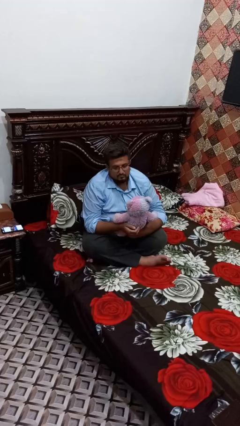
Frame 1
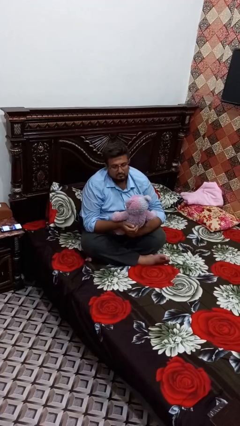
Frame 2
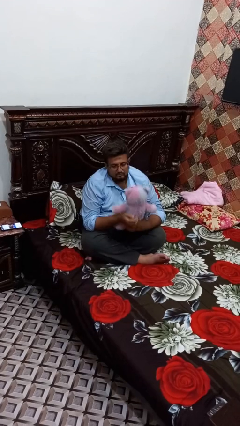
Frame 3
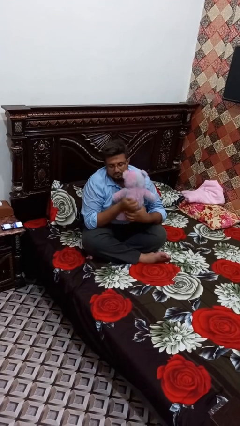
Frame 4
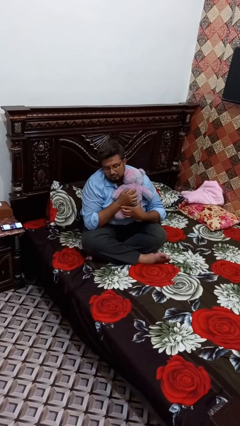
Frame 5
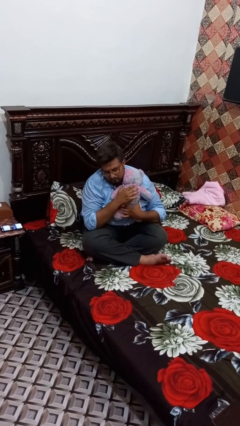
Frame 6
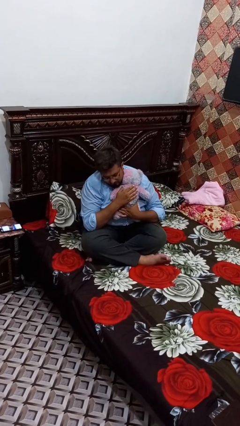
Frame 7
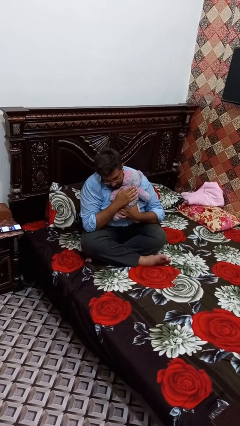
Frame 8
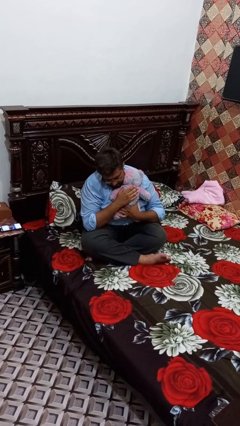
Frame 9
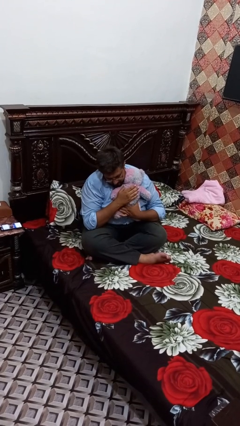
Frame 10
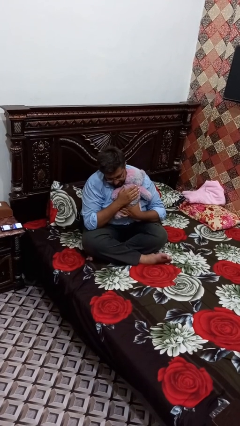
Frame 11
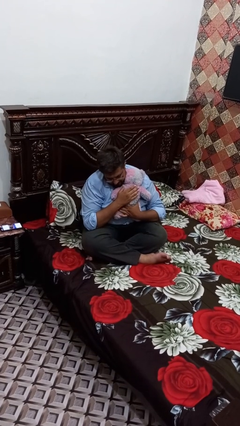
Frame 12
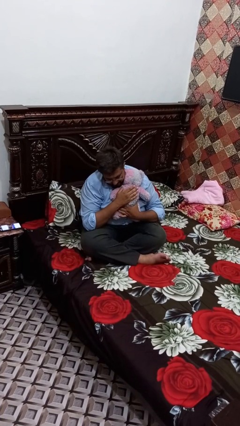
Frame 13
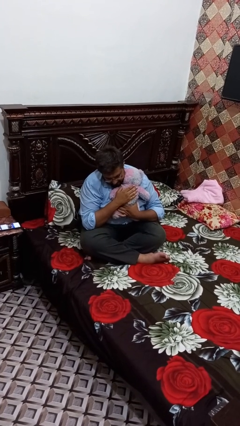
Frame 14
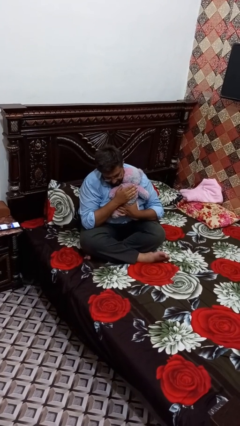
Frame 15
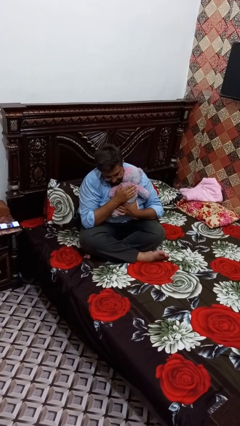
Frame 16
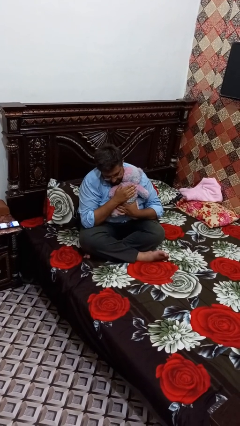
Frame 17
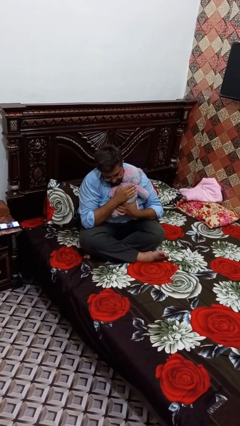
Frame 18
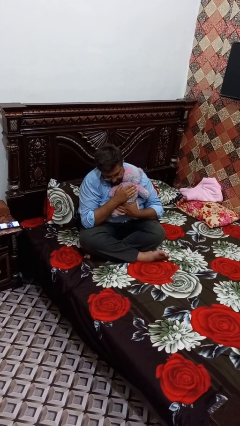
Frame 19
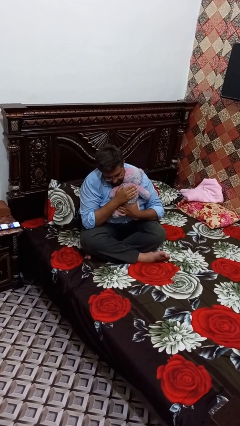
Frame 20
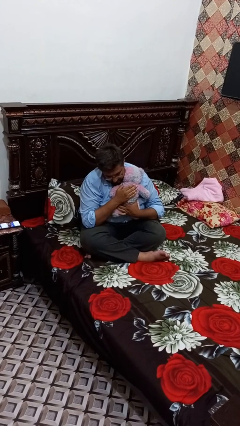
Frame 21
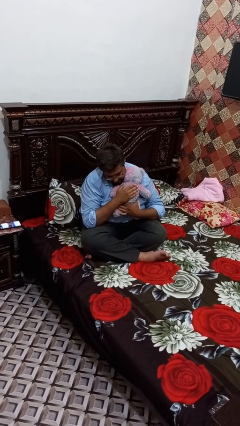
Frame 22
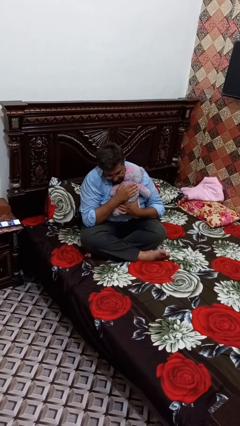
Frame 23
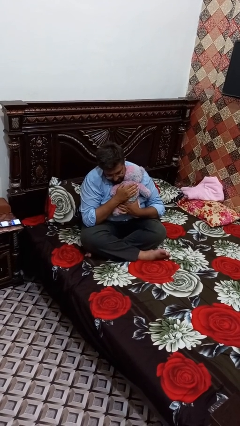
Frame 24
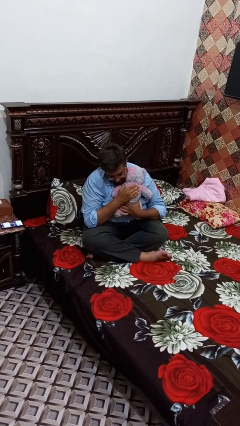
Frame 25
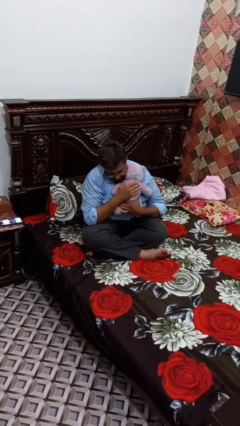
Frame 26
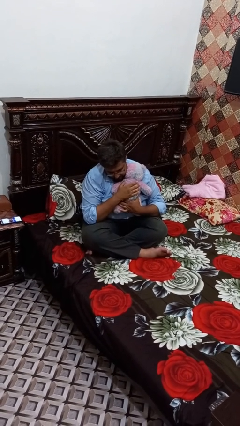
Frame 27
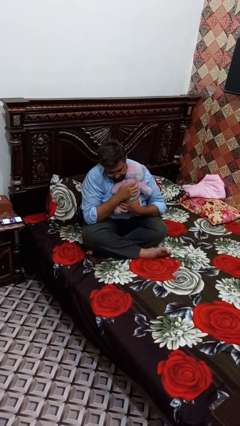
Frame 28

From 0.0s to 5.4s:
person hugs stuffed animal

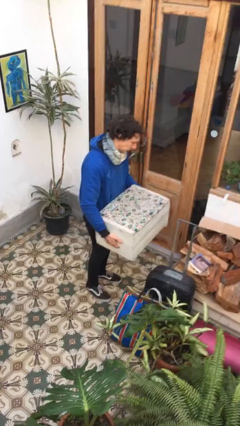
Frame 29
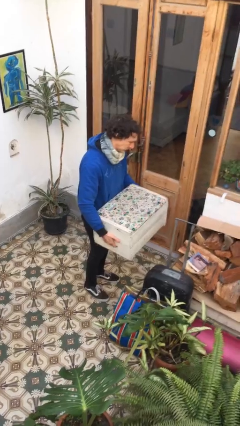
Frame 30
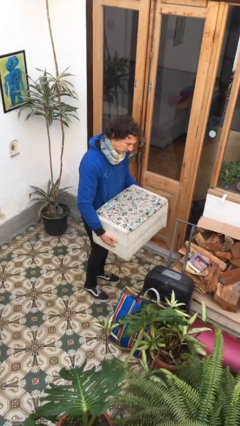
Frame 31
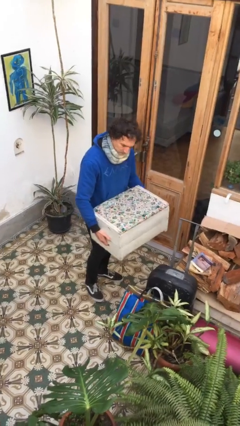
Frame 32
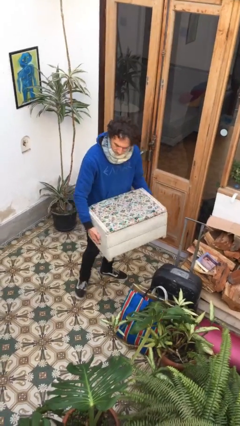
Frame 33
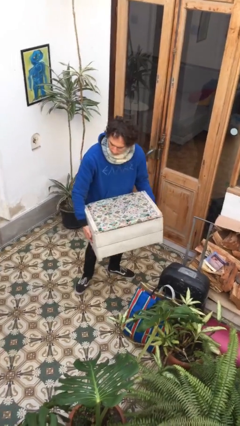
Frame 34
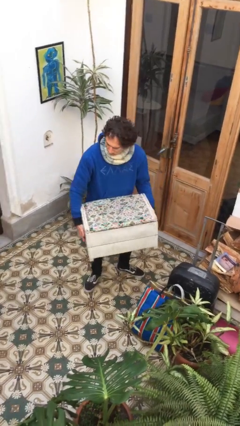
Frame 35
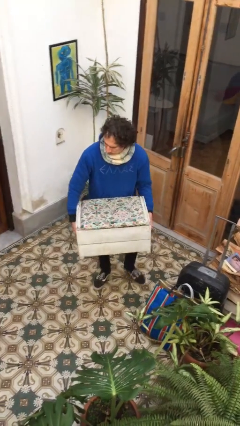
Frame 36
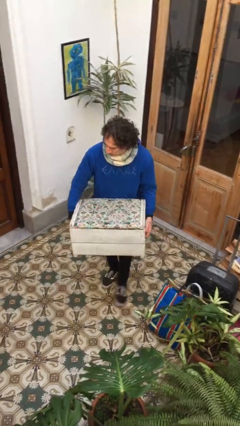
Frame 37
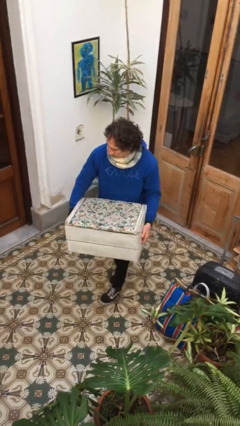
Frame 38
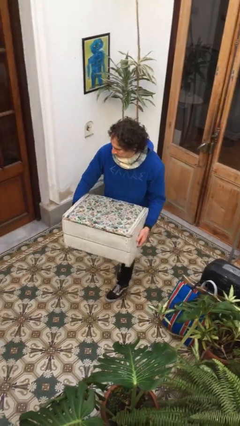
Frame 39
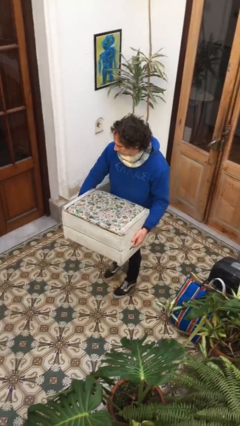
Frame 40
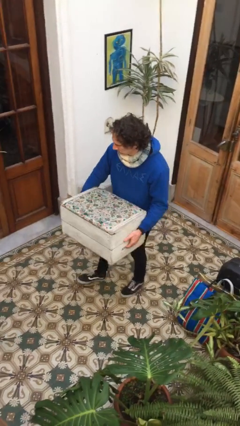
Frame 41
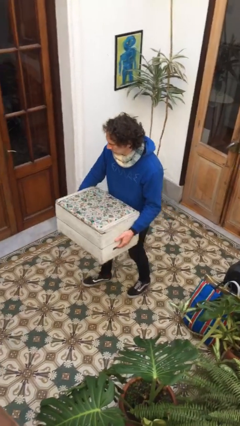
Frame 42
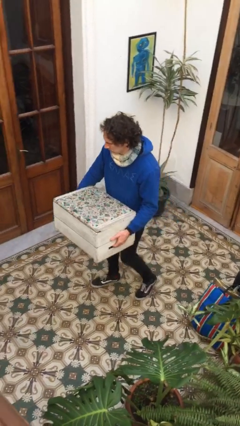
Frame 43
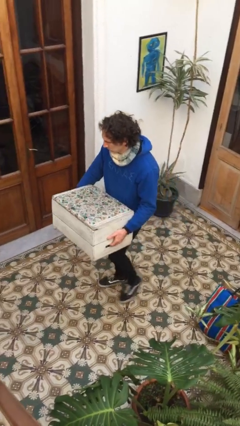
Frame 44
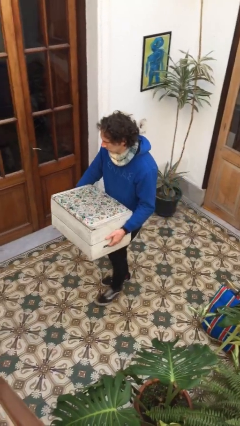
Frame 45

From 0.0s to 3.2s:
person carries furniture

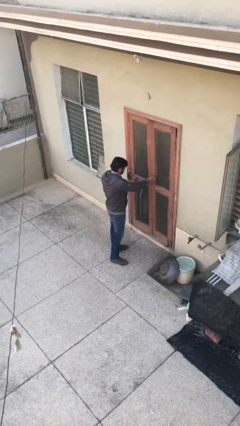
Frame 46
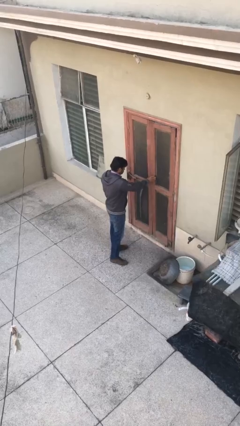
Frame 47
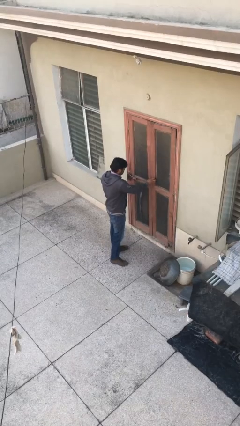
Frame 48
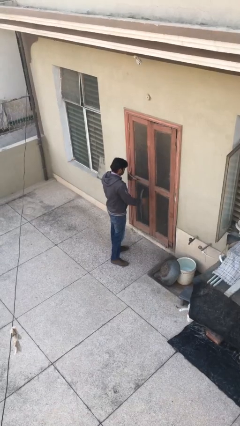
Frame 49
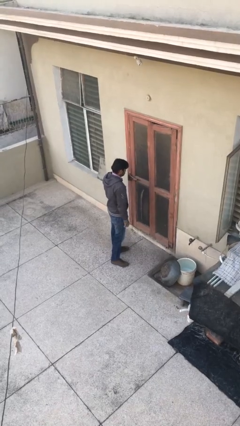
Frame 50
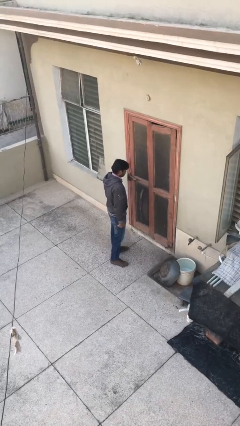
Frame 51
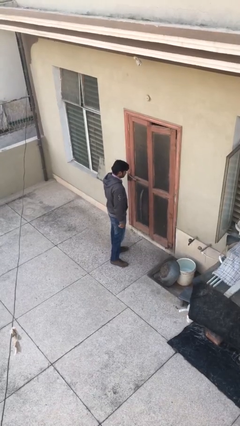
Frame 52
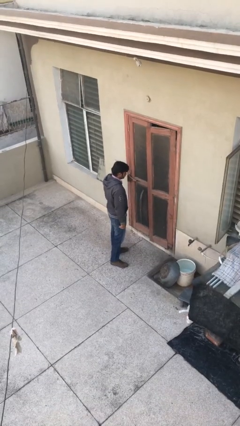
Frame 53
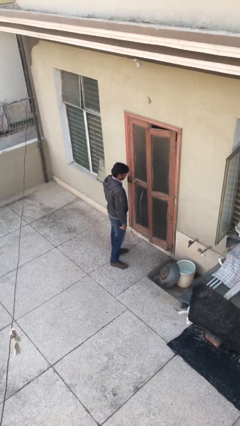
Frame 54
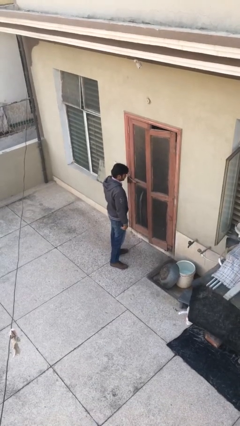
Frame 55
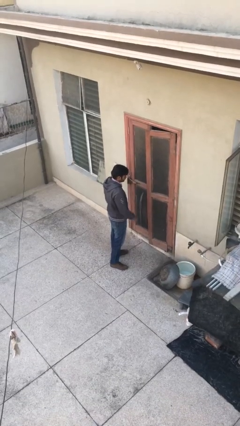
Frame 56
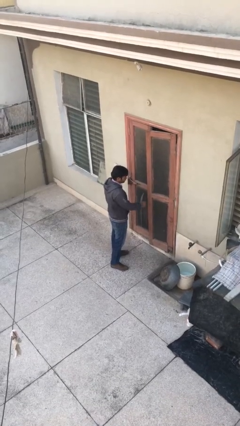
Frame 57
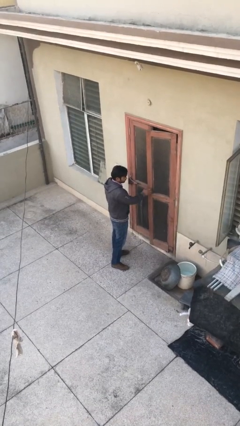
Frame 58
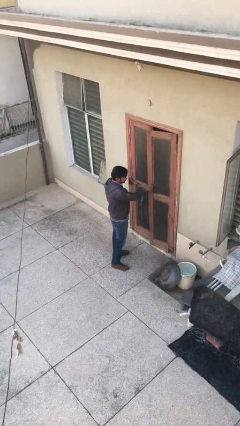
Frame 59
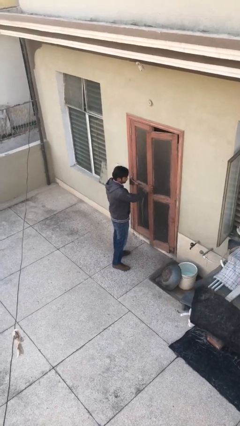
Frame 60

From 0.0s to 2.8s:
person closes facility door

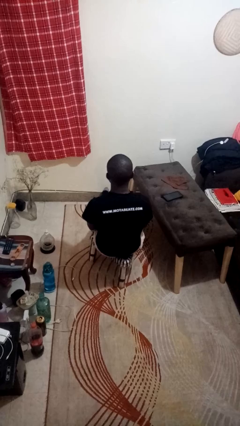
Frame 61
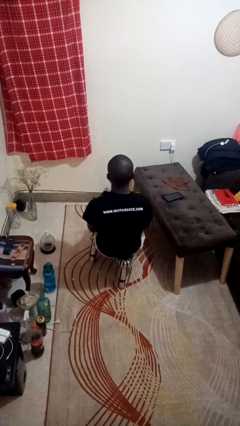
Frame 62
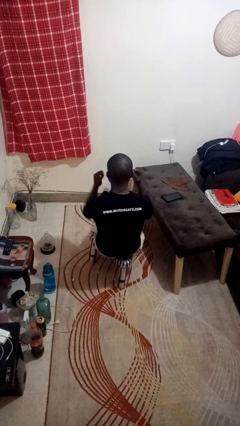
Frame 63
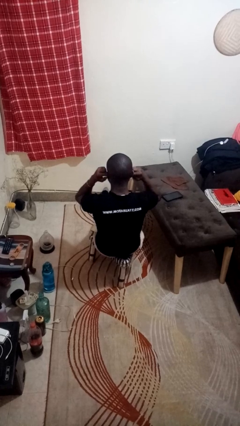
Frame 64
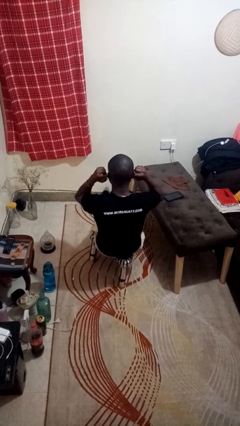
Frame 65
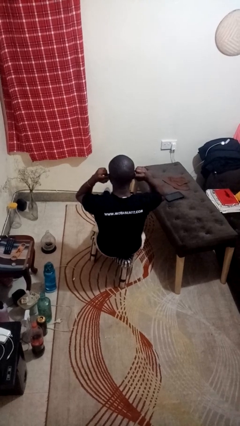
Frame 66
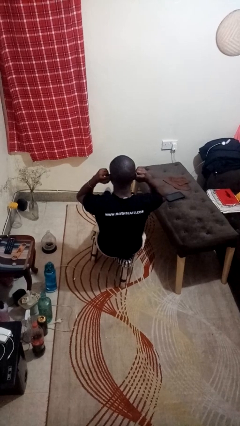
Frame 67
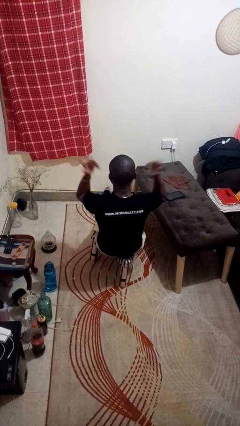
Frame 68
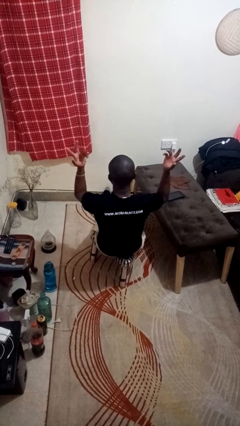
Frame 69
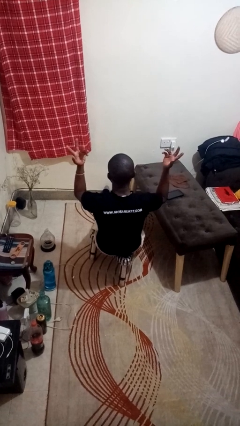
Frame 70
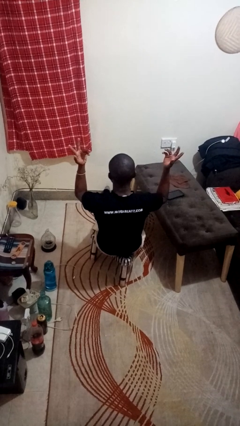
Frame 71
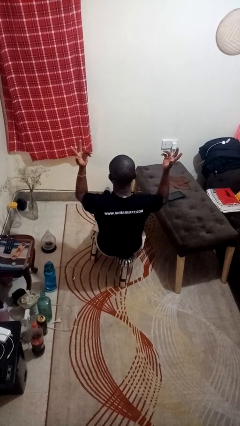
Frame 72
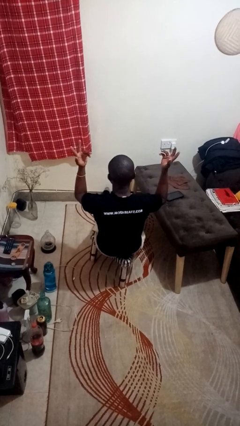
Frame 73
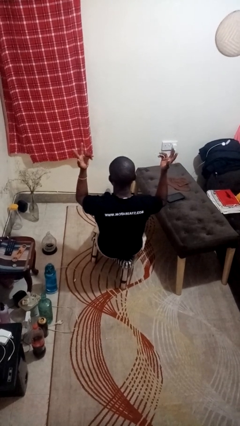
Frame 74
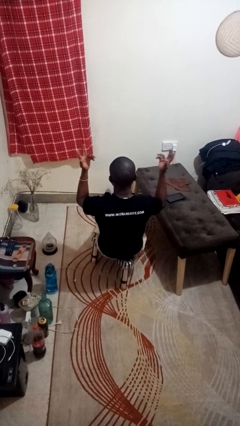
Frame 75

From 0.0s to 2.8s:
person puts fingers in ear

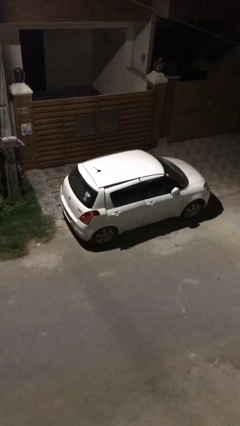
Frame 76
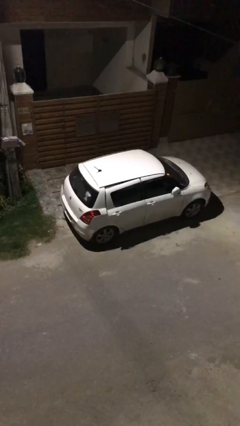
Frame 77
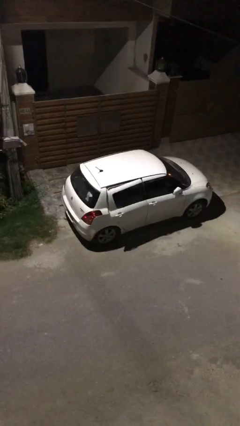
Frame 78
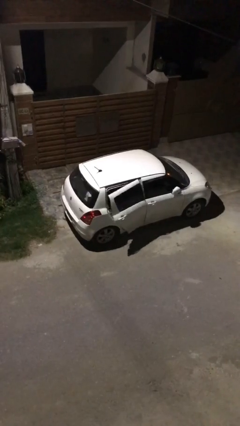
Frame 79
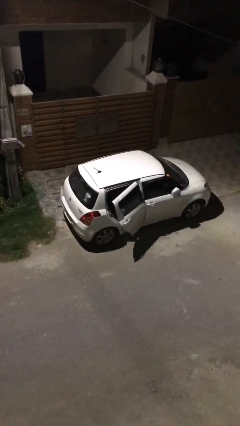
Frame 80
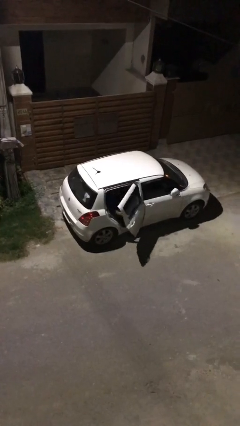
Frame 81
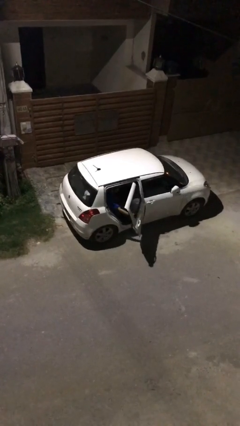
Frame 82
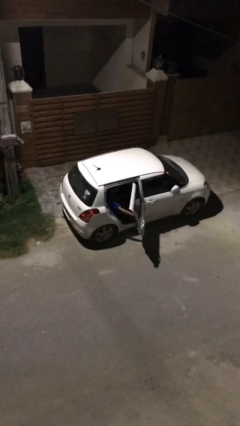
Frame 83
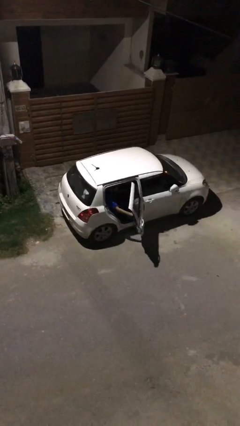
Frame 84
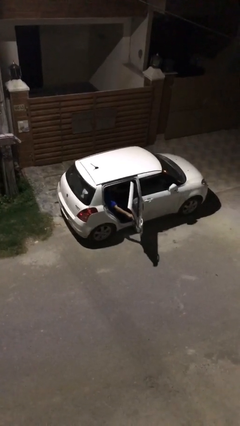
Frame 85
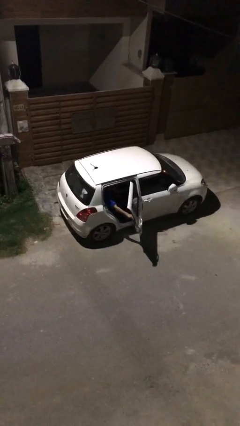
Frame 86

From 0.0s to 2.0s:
person opens car door

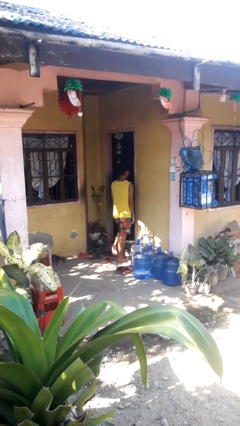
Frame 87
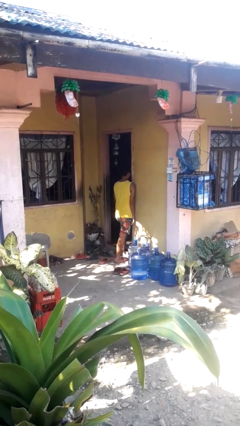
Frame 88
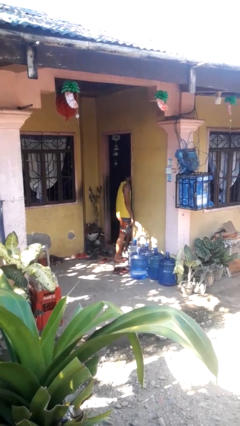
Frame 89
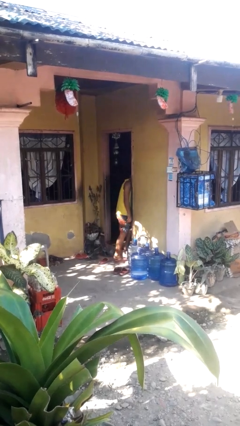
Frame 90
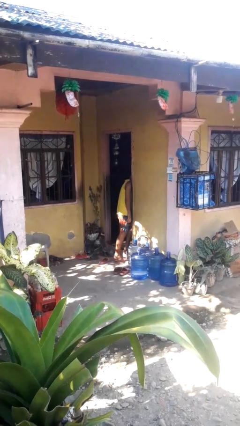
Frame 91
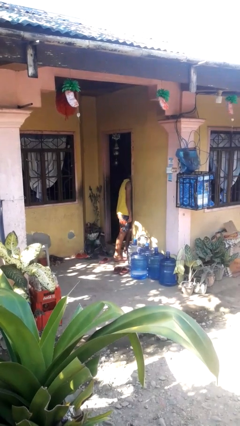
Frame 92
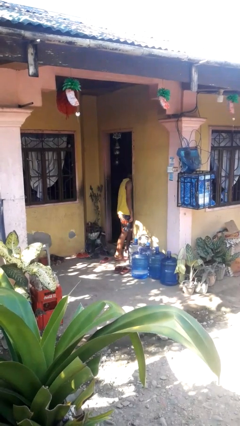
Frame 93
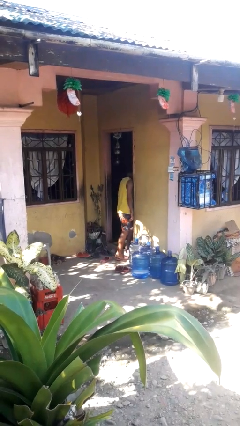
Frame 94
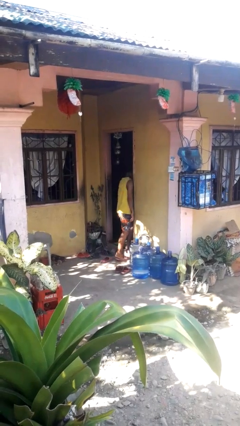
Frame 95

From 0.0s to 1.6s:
person bumps into wall
